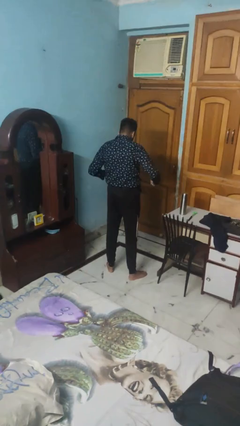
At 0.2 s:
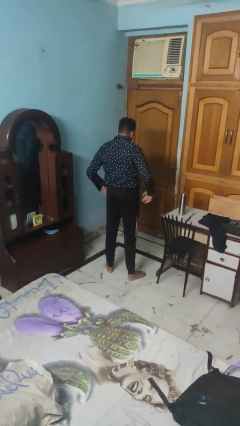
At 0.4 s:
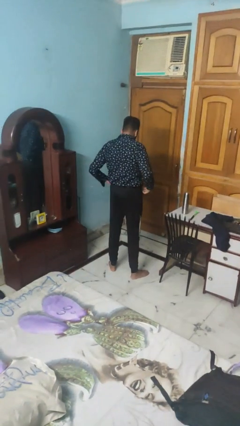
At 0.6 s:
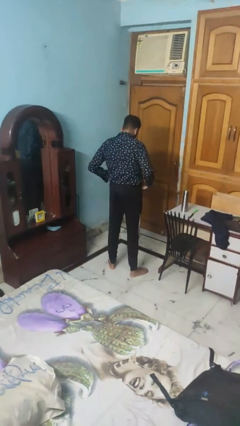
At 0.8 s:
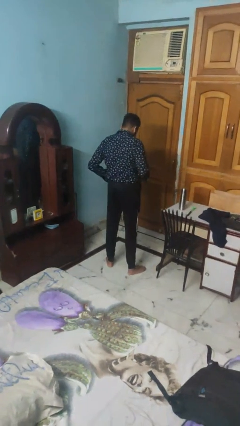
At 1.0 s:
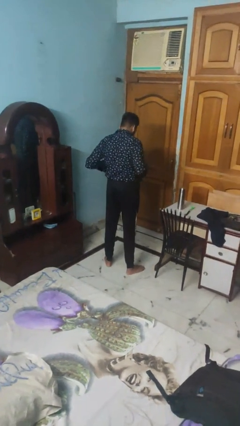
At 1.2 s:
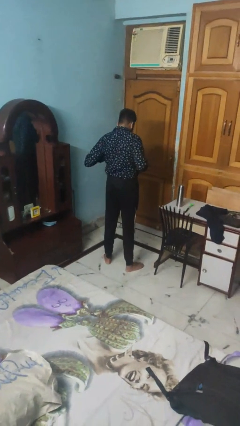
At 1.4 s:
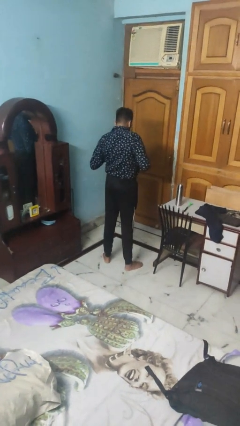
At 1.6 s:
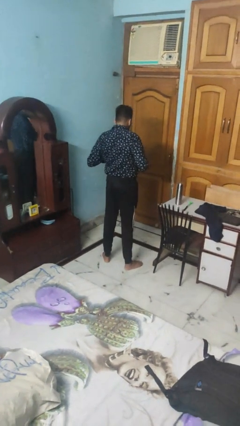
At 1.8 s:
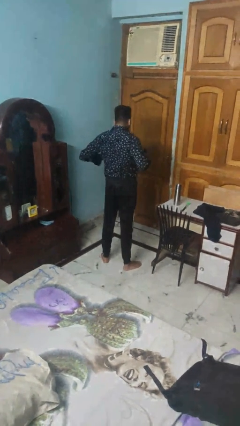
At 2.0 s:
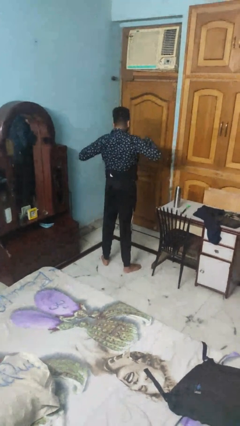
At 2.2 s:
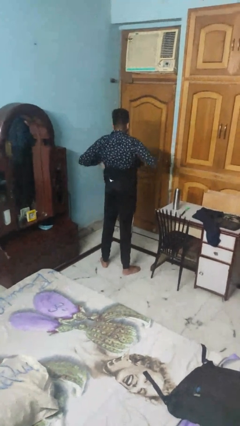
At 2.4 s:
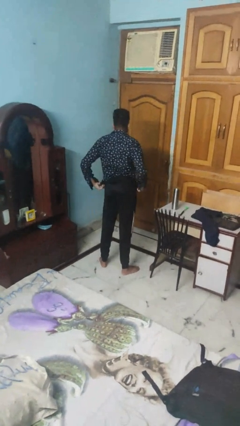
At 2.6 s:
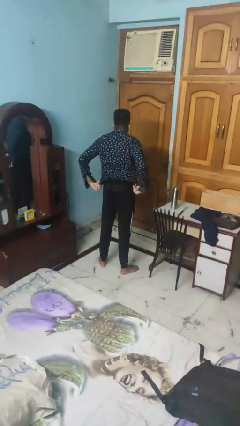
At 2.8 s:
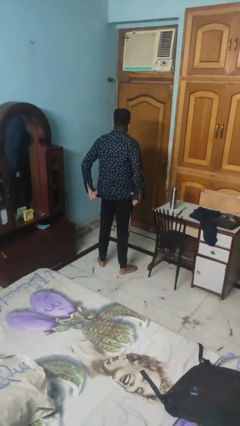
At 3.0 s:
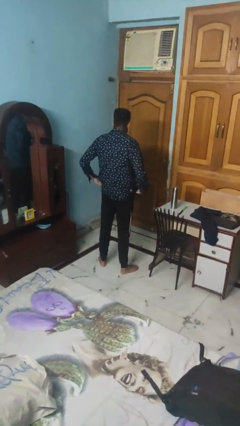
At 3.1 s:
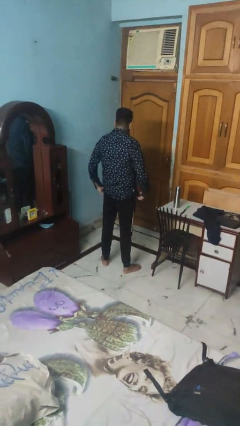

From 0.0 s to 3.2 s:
person untucks shirt

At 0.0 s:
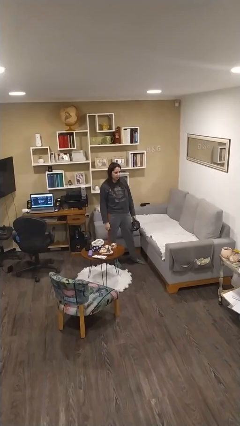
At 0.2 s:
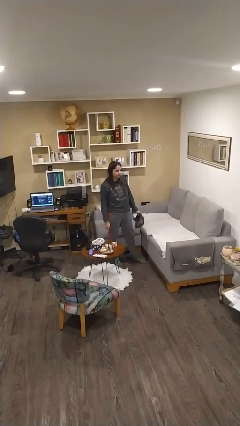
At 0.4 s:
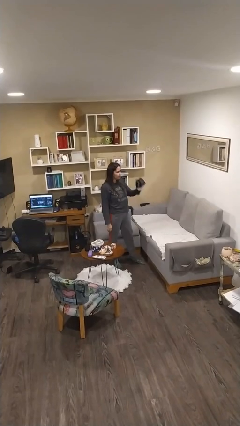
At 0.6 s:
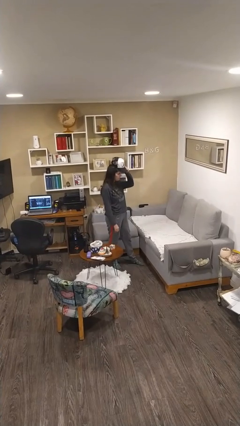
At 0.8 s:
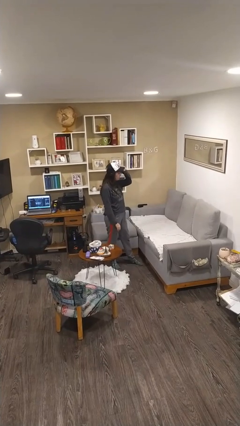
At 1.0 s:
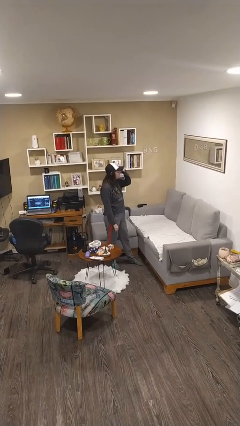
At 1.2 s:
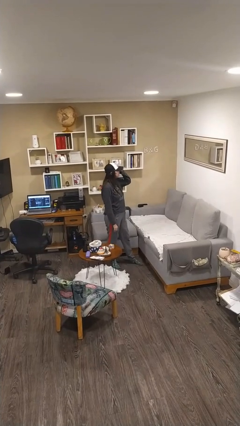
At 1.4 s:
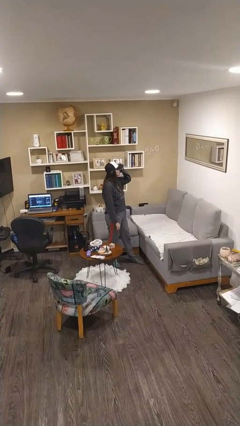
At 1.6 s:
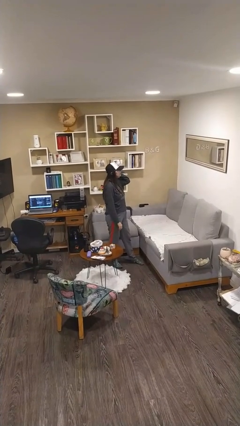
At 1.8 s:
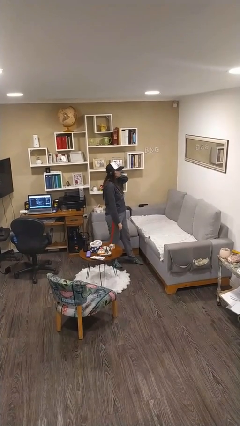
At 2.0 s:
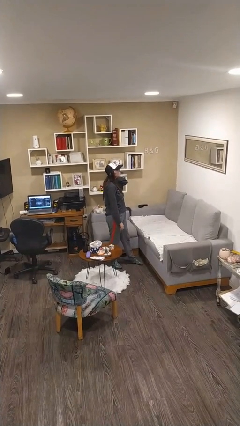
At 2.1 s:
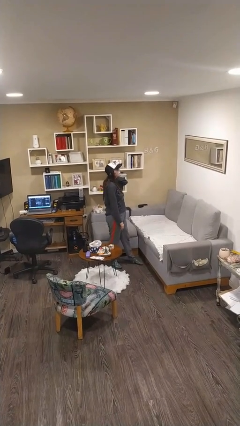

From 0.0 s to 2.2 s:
person puts on hat

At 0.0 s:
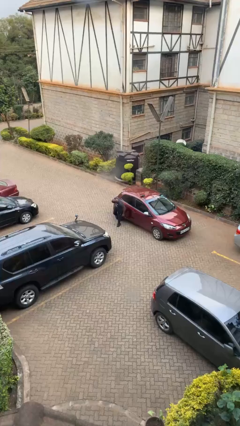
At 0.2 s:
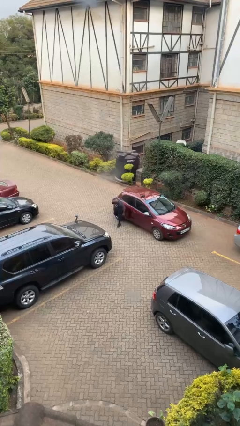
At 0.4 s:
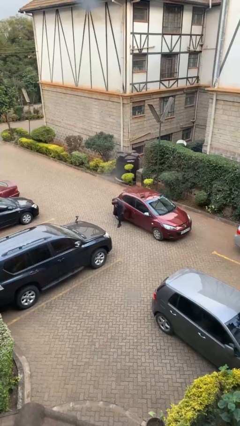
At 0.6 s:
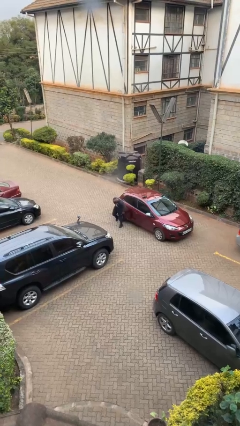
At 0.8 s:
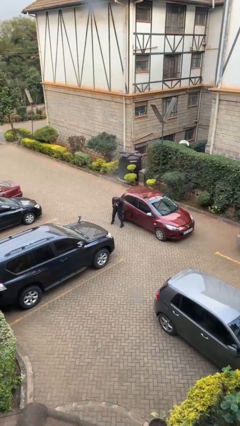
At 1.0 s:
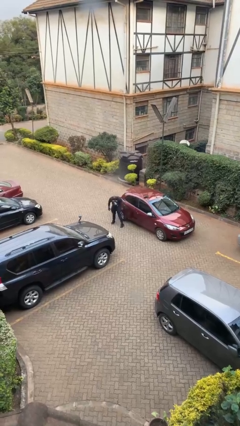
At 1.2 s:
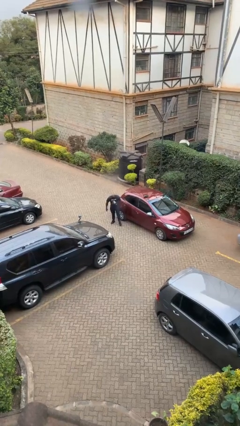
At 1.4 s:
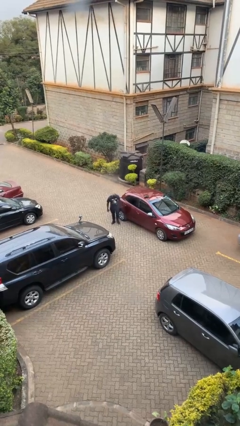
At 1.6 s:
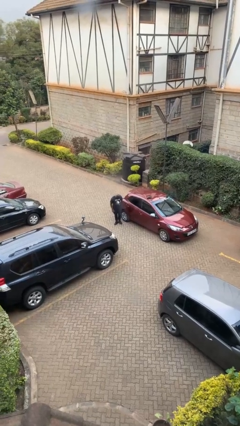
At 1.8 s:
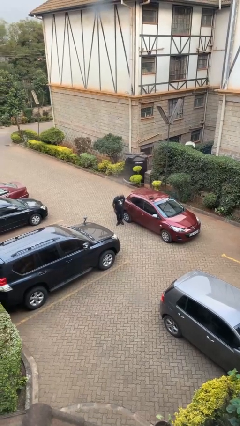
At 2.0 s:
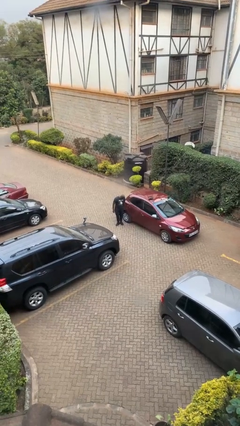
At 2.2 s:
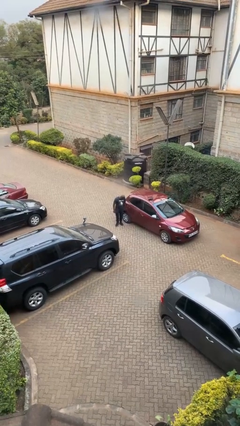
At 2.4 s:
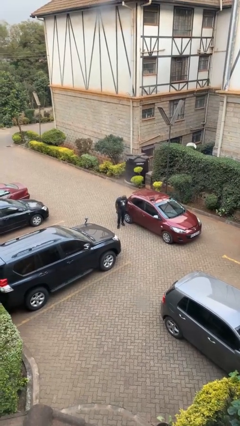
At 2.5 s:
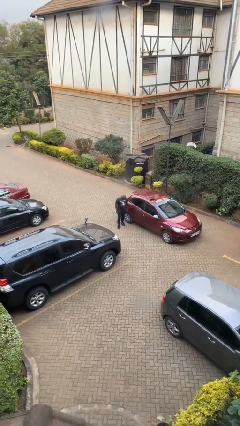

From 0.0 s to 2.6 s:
person kicks car tires

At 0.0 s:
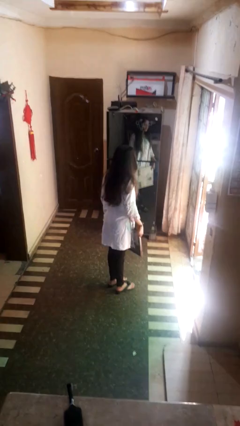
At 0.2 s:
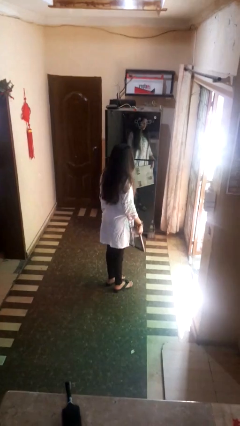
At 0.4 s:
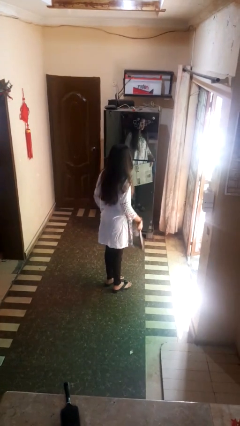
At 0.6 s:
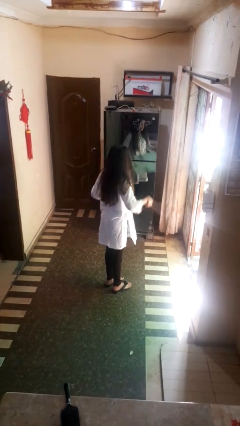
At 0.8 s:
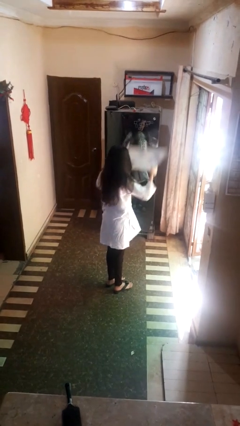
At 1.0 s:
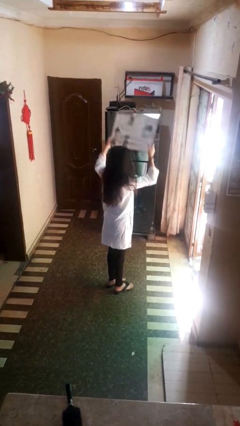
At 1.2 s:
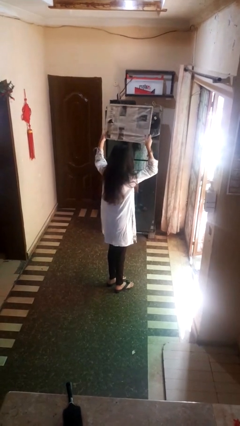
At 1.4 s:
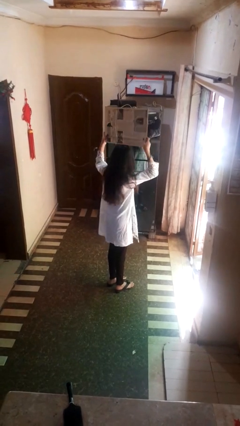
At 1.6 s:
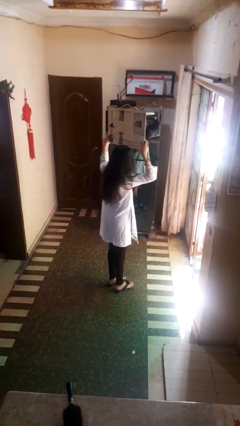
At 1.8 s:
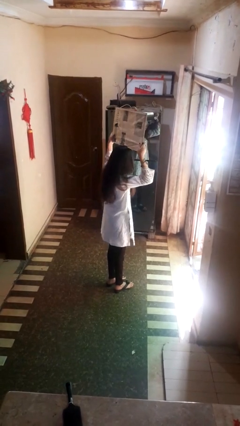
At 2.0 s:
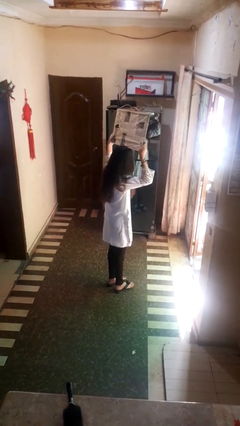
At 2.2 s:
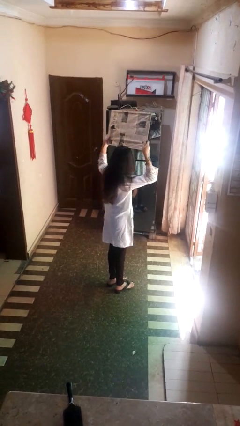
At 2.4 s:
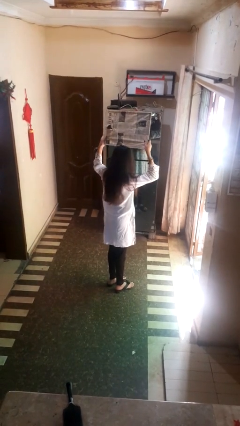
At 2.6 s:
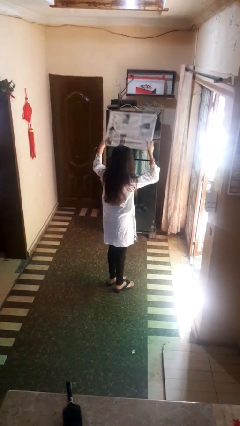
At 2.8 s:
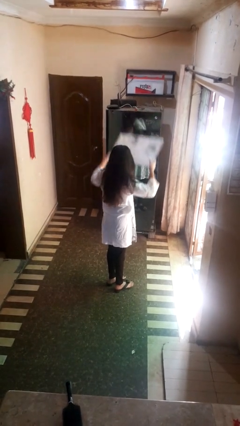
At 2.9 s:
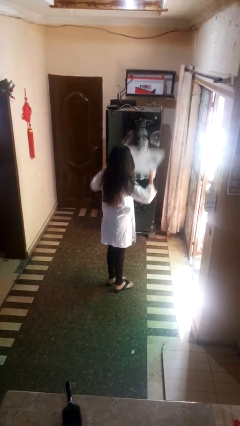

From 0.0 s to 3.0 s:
person holds object above head

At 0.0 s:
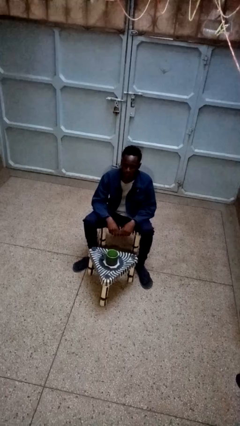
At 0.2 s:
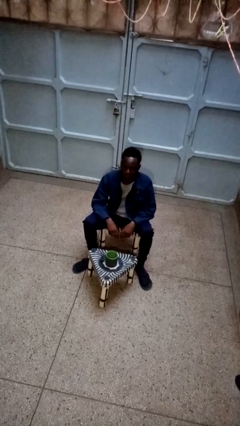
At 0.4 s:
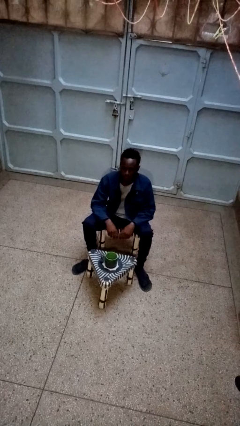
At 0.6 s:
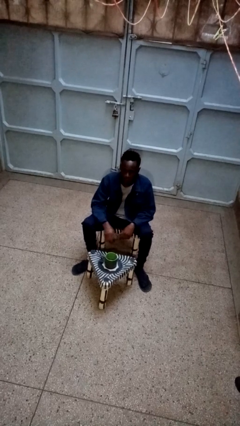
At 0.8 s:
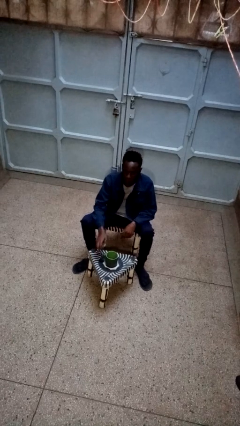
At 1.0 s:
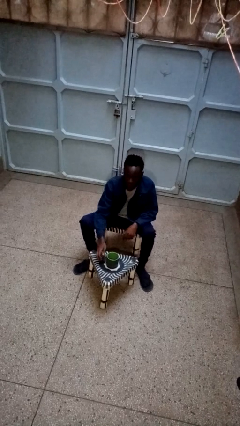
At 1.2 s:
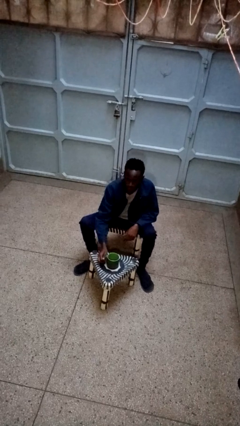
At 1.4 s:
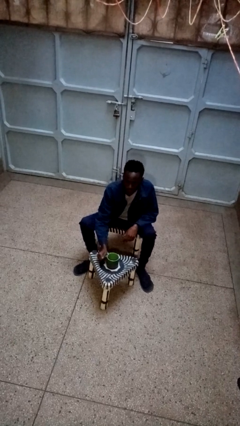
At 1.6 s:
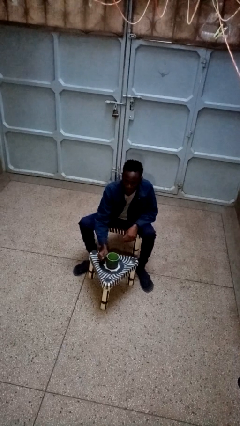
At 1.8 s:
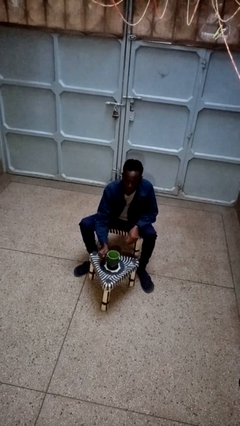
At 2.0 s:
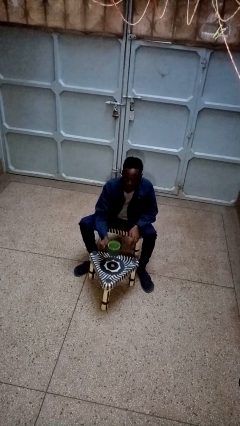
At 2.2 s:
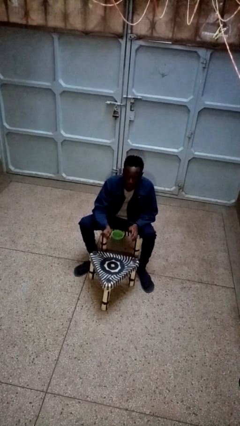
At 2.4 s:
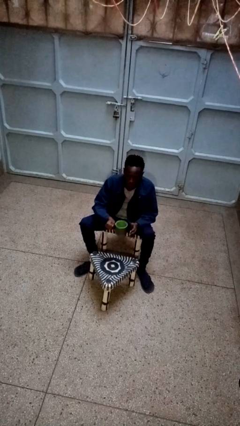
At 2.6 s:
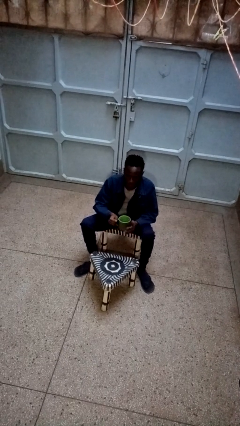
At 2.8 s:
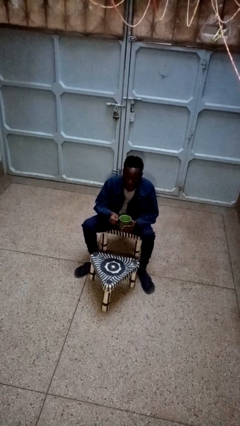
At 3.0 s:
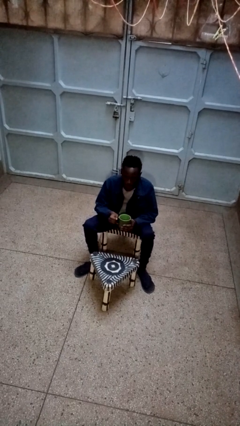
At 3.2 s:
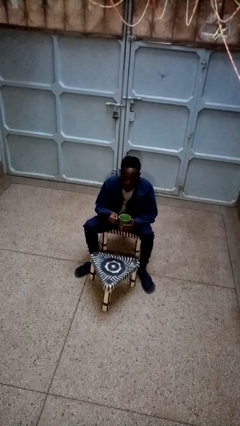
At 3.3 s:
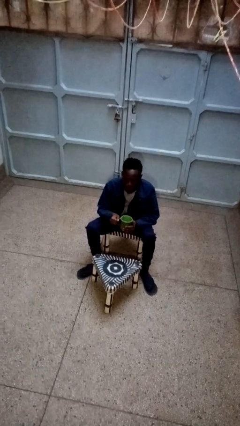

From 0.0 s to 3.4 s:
person picks up object from table

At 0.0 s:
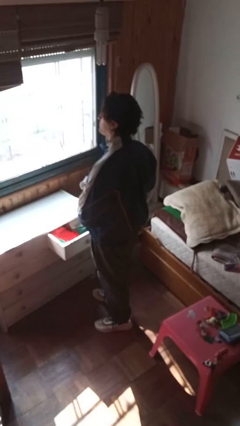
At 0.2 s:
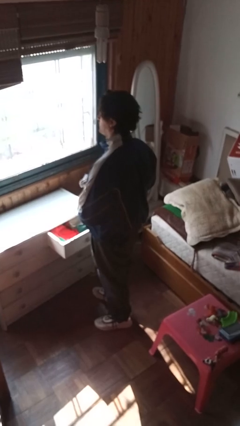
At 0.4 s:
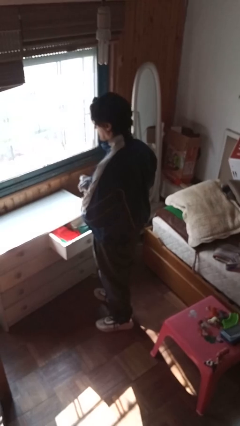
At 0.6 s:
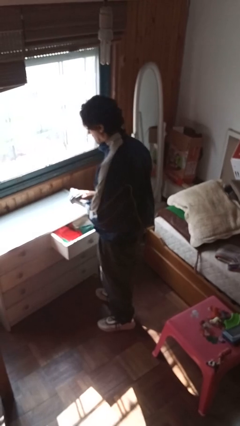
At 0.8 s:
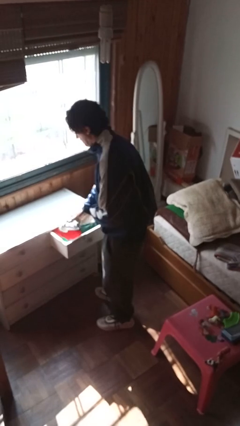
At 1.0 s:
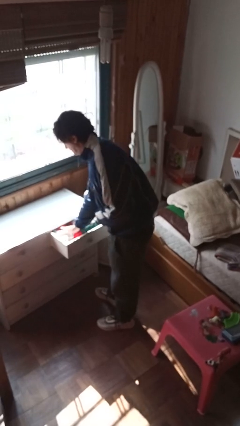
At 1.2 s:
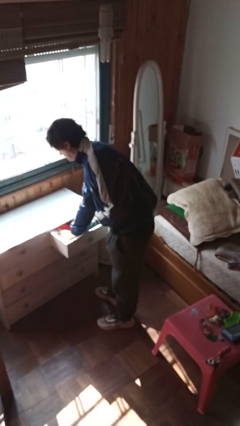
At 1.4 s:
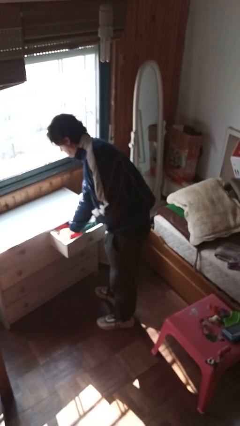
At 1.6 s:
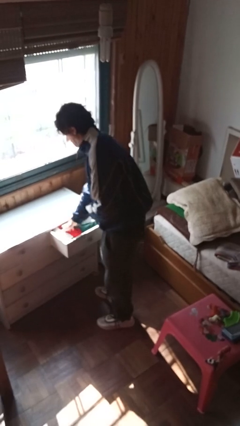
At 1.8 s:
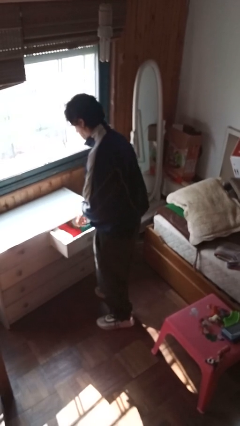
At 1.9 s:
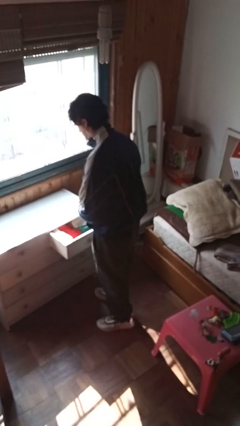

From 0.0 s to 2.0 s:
person puts clothes into dresser

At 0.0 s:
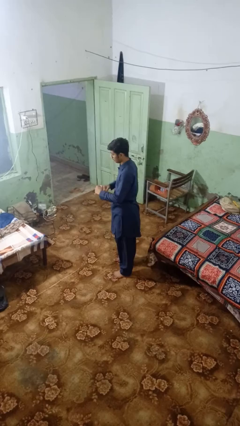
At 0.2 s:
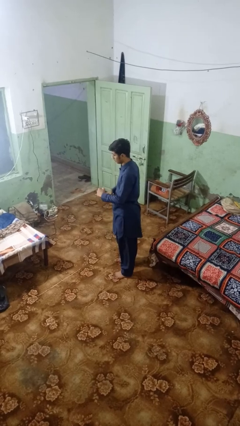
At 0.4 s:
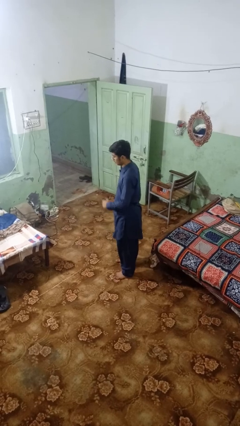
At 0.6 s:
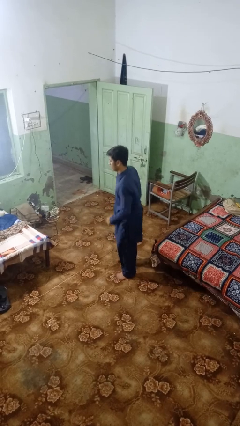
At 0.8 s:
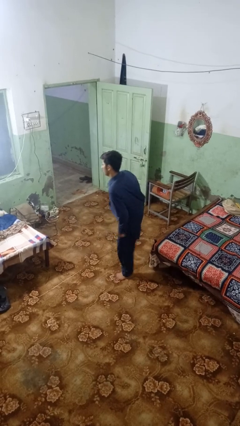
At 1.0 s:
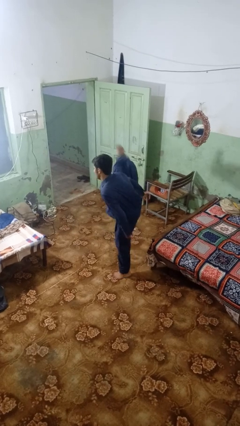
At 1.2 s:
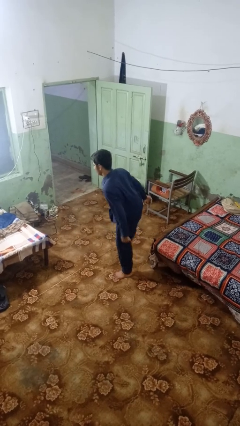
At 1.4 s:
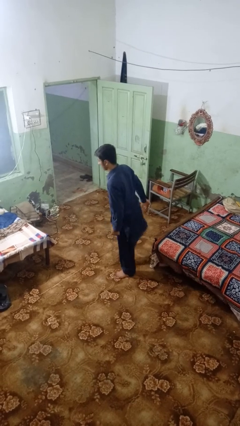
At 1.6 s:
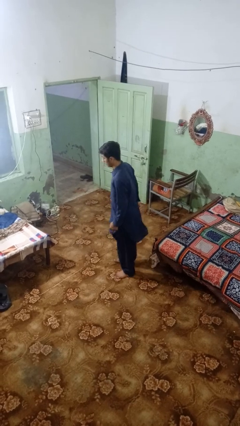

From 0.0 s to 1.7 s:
person karate kicks
